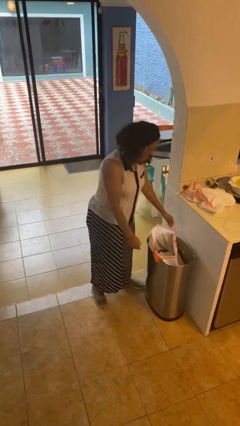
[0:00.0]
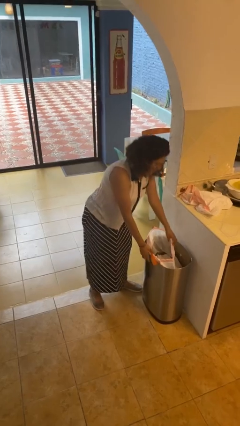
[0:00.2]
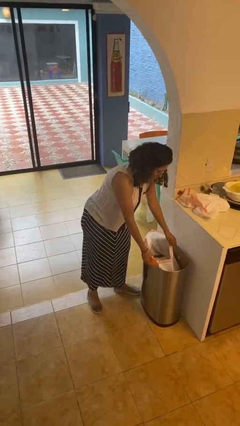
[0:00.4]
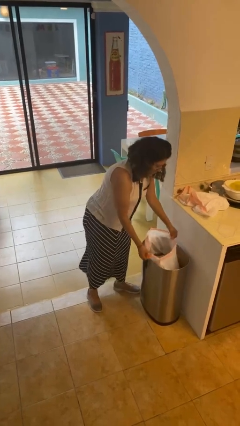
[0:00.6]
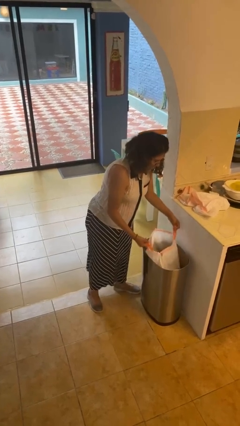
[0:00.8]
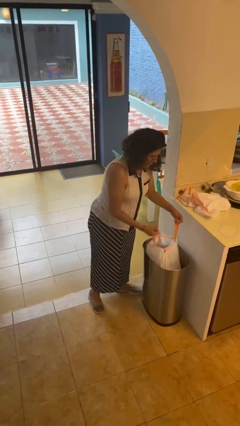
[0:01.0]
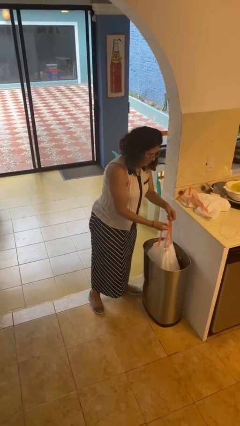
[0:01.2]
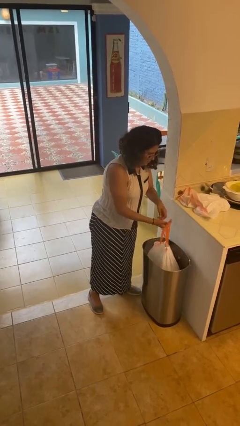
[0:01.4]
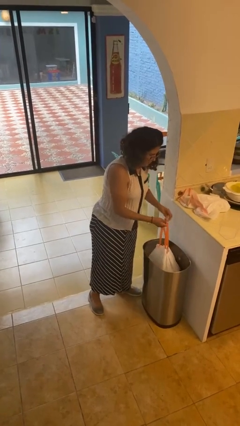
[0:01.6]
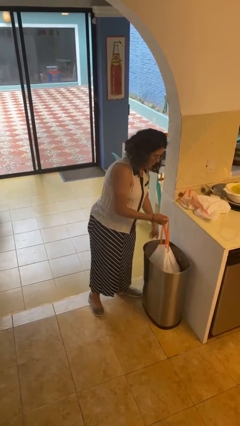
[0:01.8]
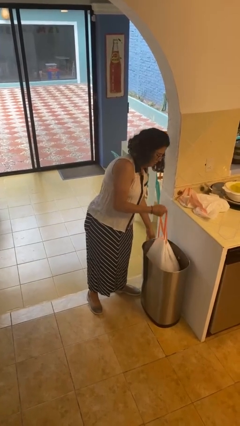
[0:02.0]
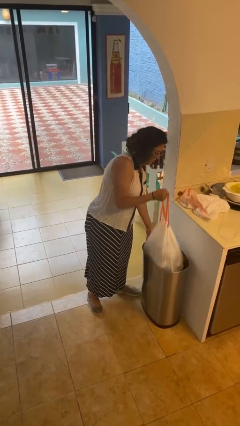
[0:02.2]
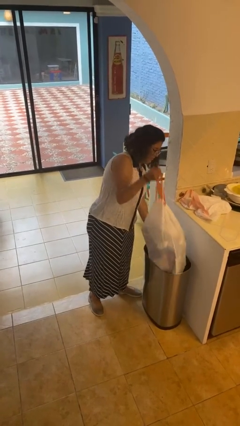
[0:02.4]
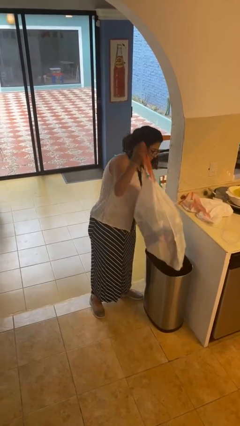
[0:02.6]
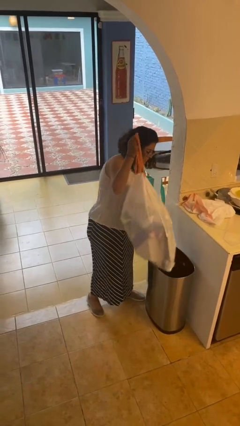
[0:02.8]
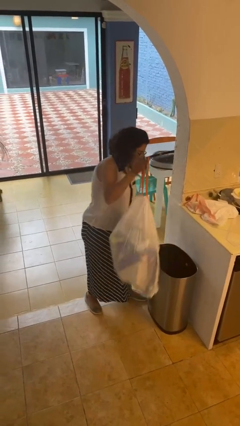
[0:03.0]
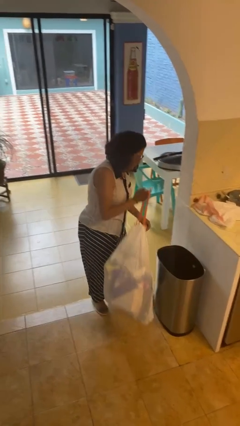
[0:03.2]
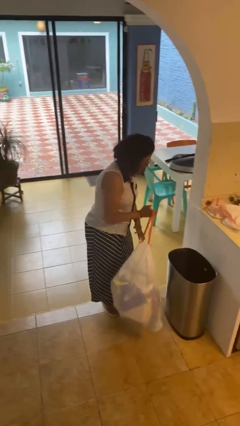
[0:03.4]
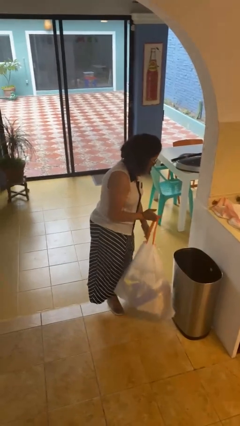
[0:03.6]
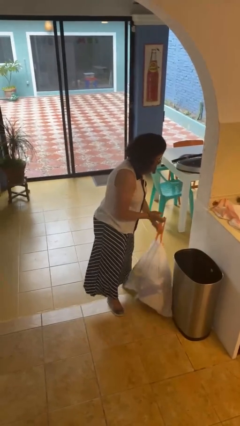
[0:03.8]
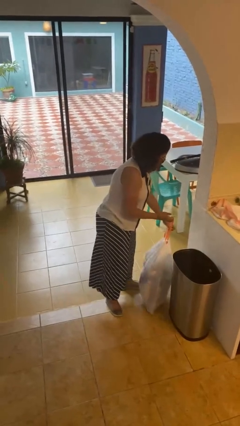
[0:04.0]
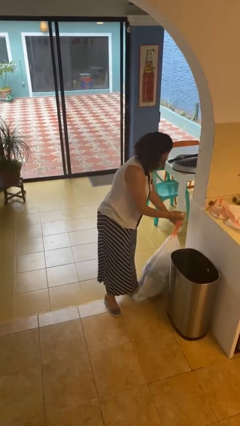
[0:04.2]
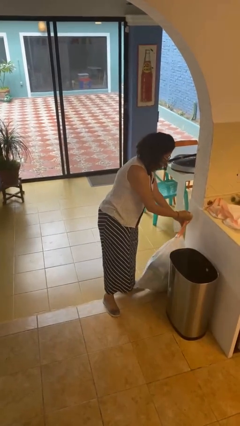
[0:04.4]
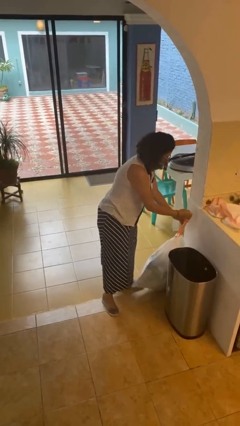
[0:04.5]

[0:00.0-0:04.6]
person removes trashbag from trashcan

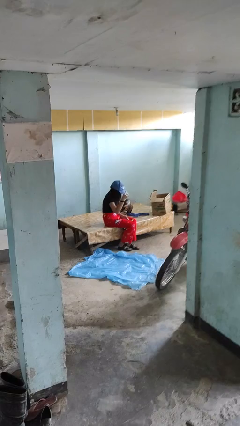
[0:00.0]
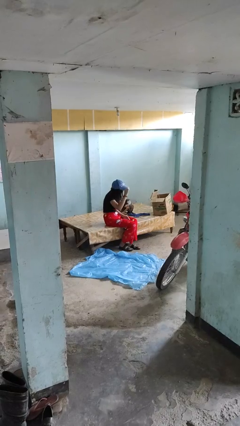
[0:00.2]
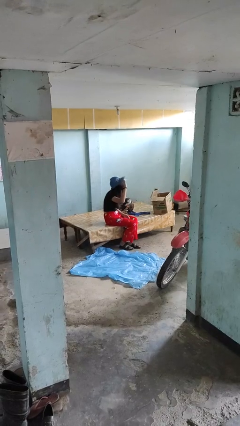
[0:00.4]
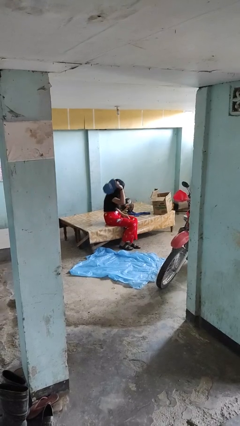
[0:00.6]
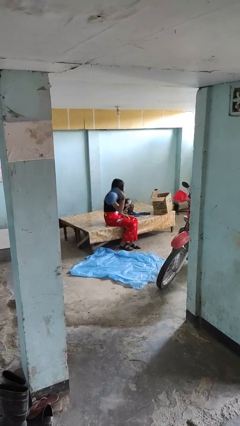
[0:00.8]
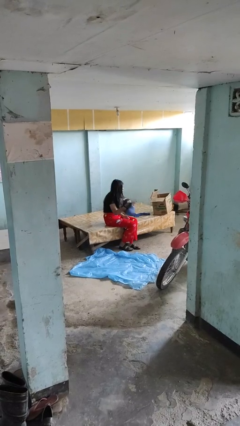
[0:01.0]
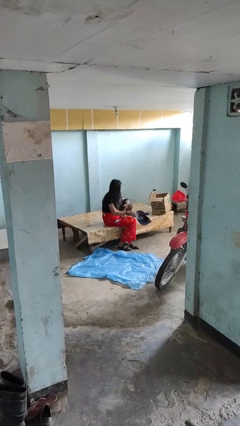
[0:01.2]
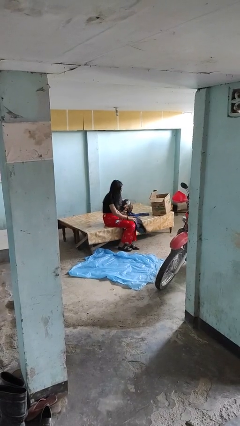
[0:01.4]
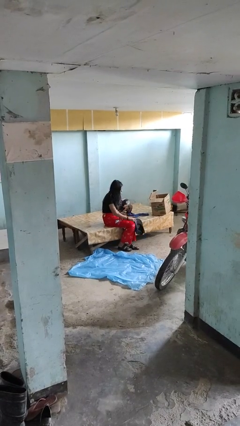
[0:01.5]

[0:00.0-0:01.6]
person takes off hat

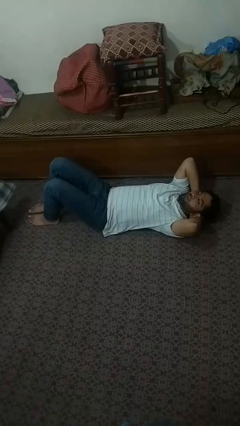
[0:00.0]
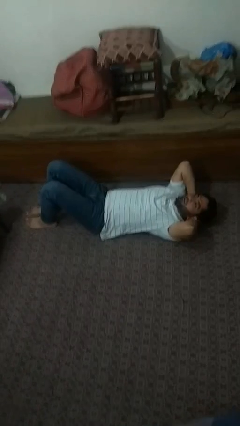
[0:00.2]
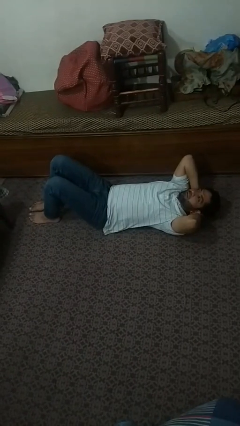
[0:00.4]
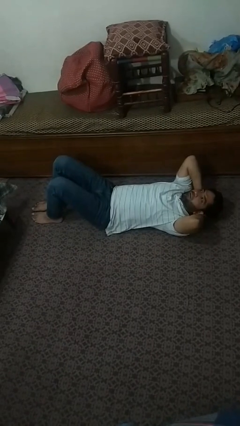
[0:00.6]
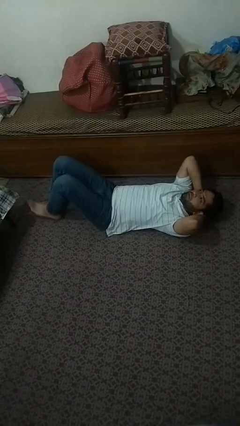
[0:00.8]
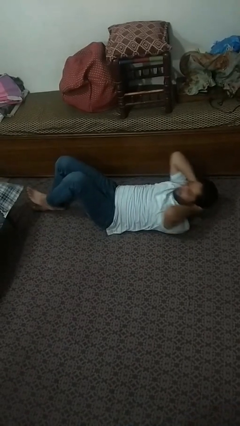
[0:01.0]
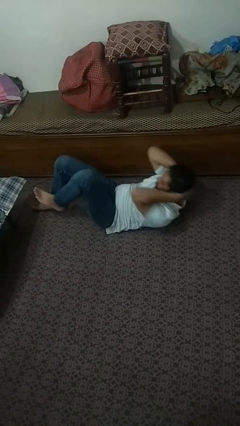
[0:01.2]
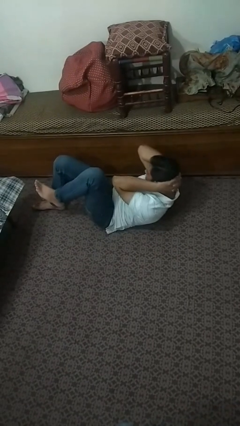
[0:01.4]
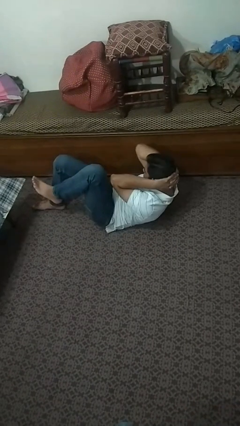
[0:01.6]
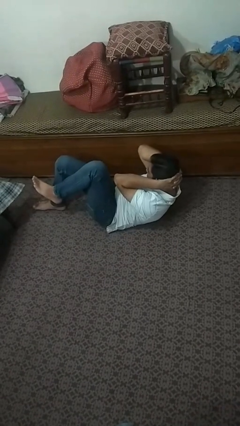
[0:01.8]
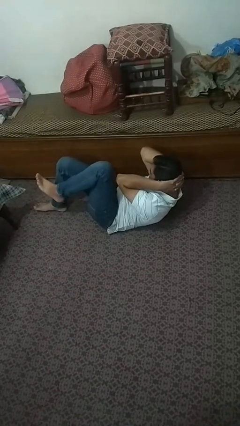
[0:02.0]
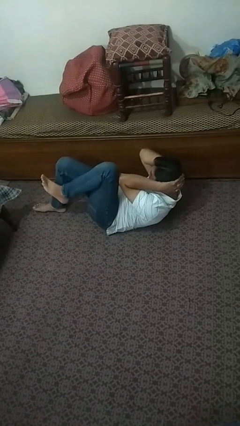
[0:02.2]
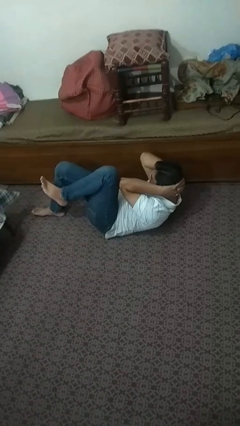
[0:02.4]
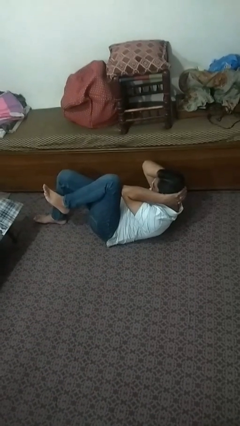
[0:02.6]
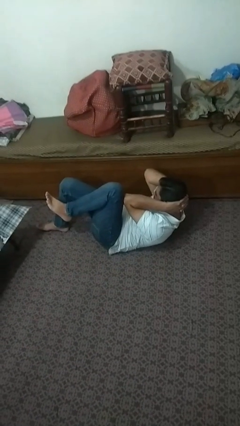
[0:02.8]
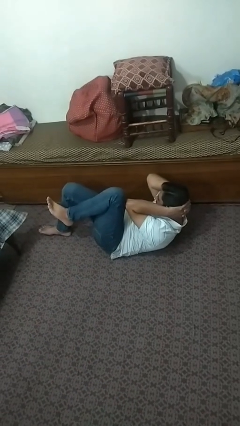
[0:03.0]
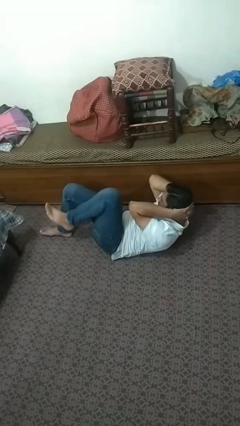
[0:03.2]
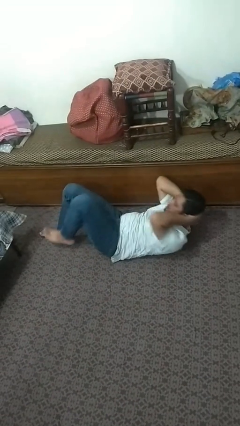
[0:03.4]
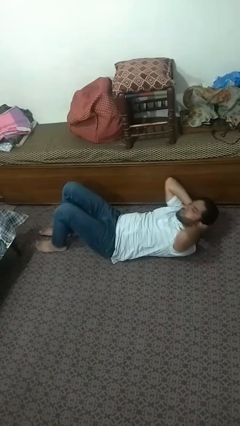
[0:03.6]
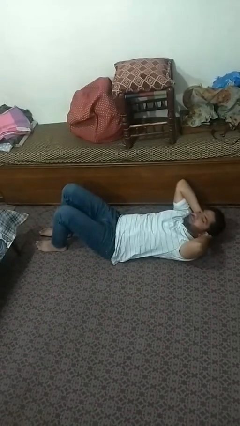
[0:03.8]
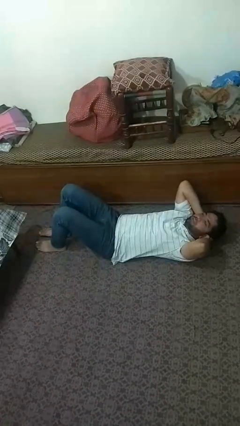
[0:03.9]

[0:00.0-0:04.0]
person exercises with situp

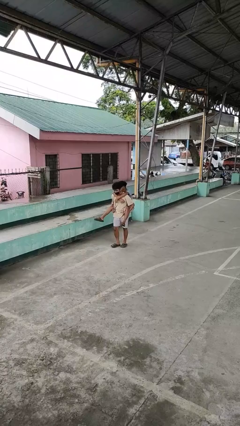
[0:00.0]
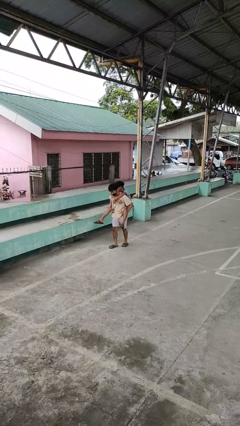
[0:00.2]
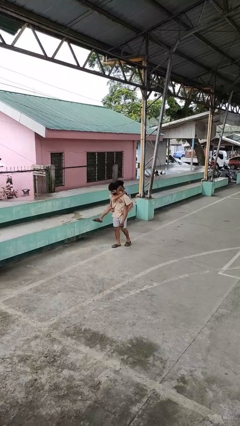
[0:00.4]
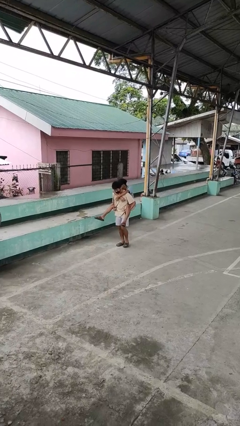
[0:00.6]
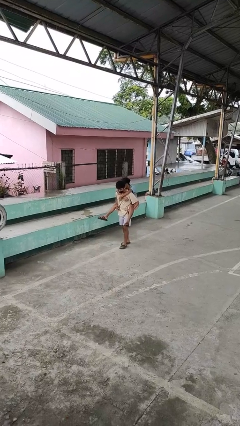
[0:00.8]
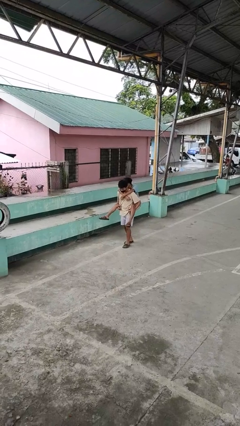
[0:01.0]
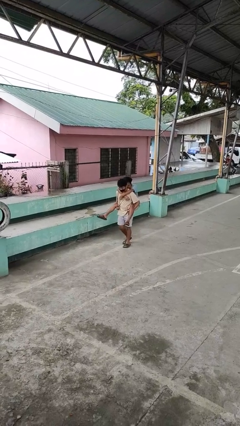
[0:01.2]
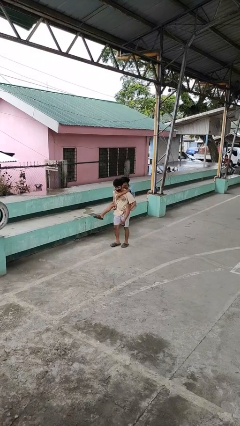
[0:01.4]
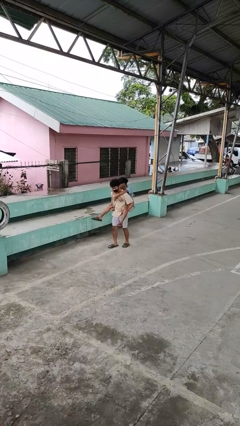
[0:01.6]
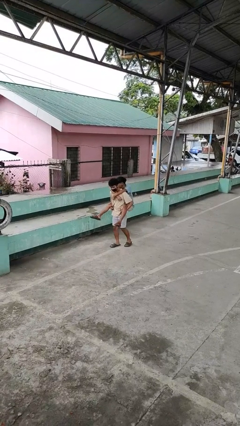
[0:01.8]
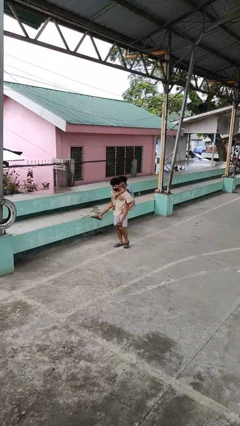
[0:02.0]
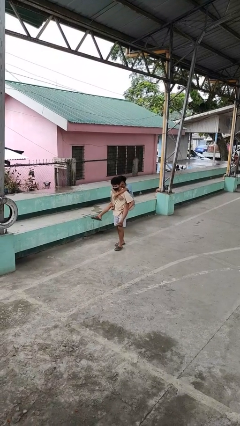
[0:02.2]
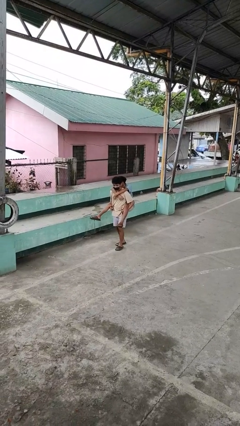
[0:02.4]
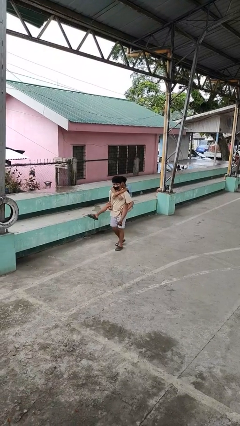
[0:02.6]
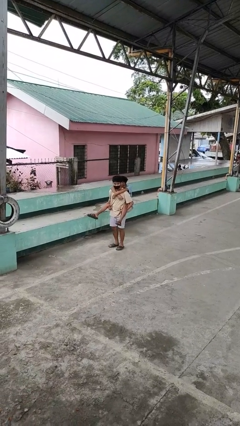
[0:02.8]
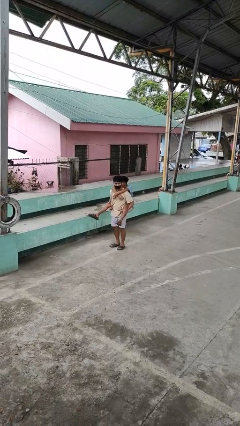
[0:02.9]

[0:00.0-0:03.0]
person carries person on back

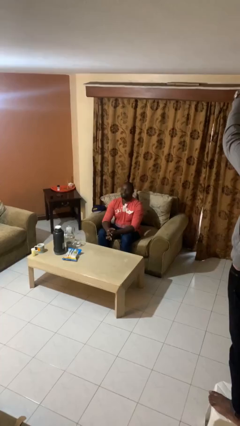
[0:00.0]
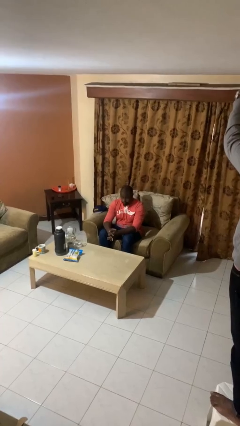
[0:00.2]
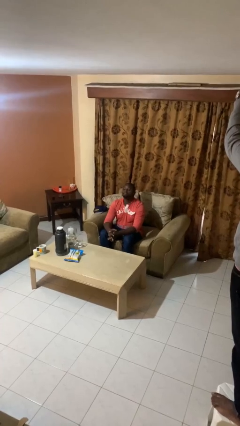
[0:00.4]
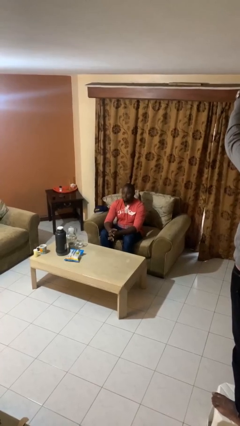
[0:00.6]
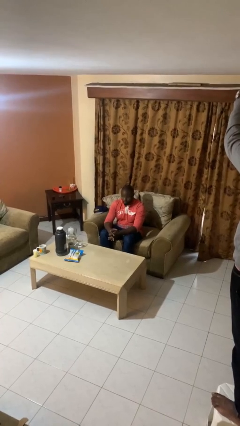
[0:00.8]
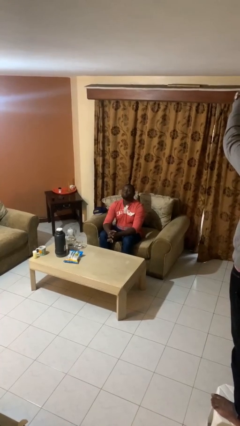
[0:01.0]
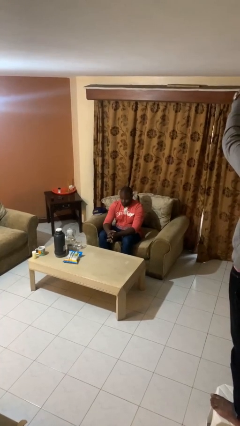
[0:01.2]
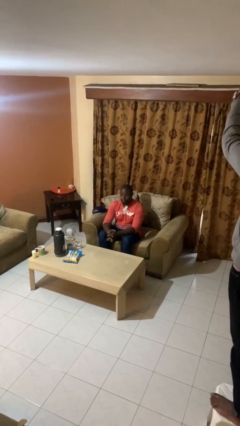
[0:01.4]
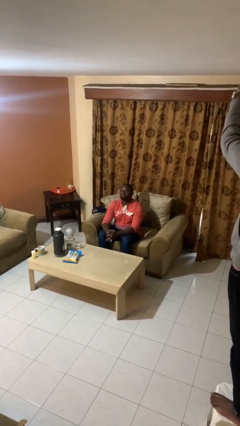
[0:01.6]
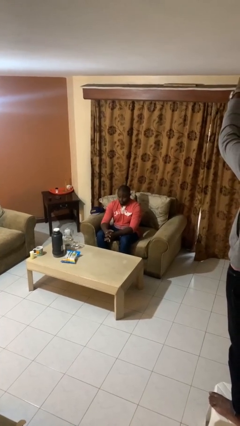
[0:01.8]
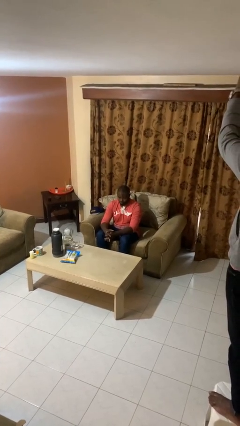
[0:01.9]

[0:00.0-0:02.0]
person nods head

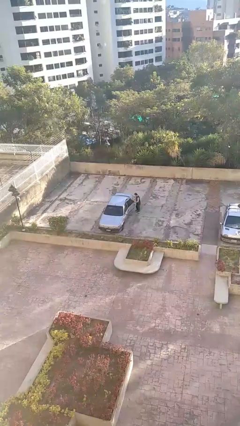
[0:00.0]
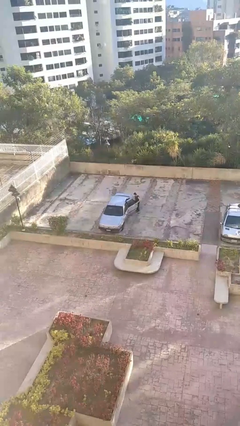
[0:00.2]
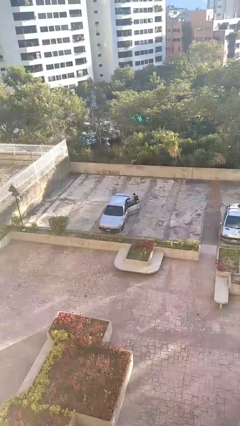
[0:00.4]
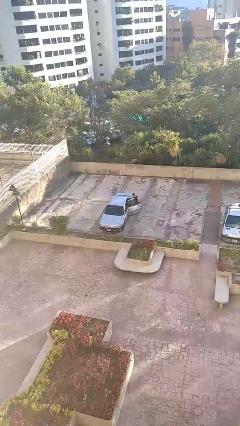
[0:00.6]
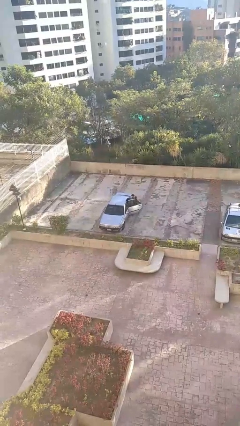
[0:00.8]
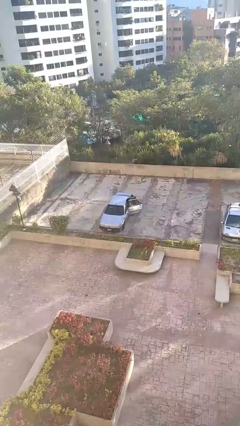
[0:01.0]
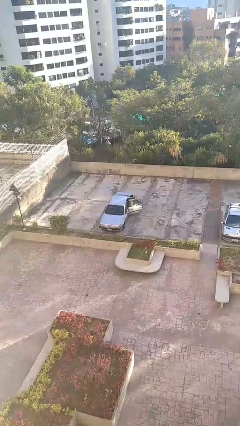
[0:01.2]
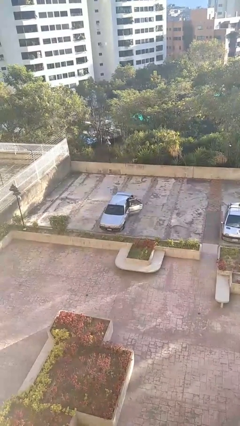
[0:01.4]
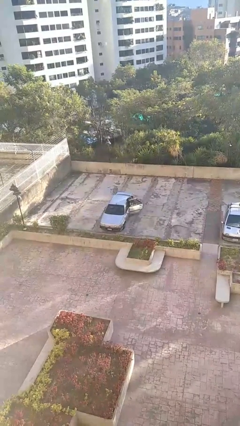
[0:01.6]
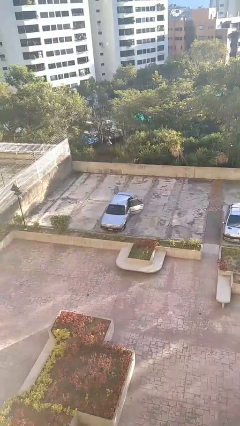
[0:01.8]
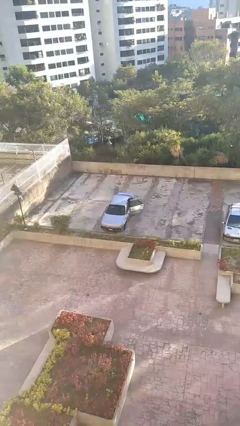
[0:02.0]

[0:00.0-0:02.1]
car picks up person

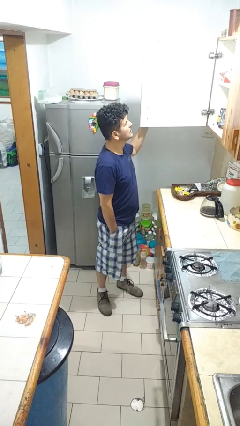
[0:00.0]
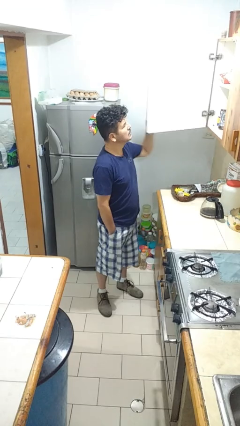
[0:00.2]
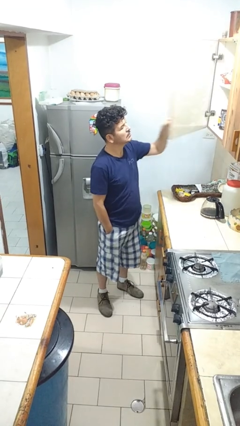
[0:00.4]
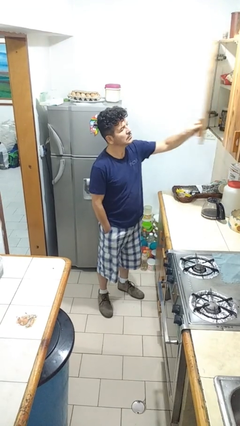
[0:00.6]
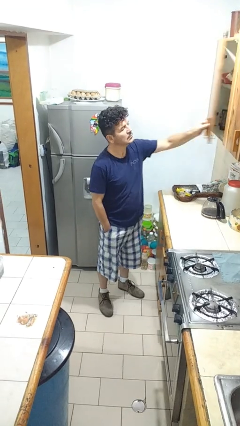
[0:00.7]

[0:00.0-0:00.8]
person closes cabinet
